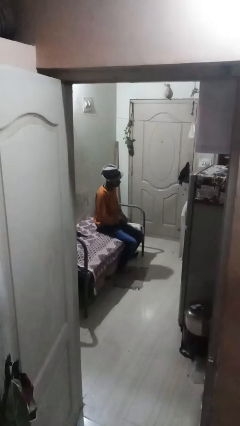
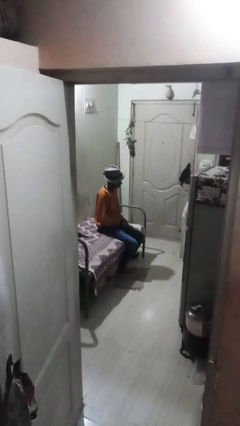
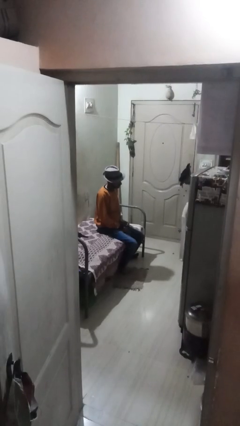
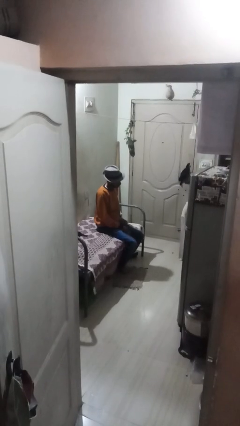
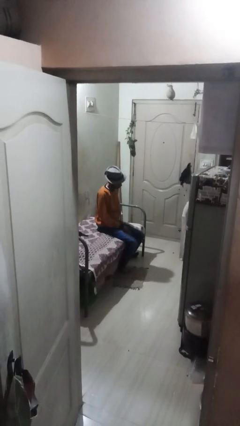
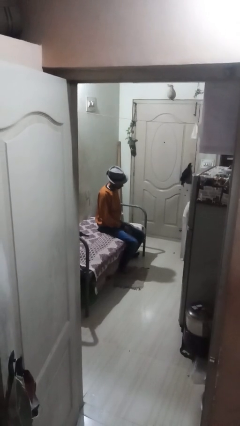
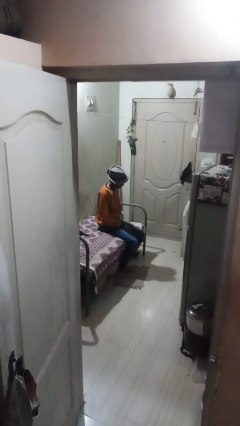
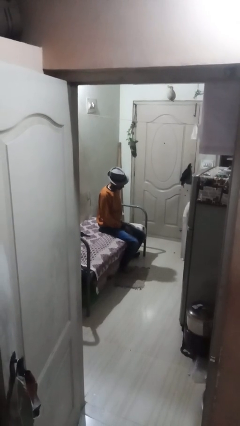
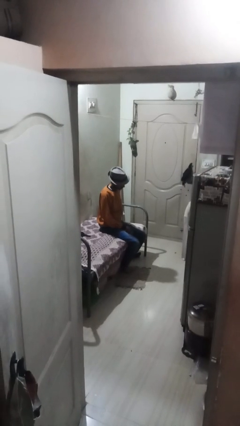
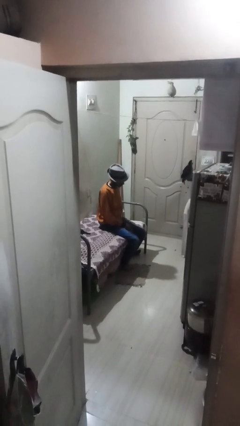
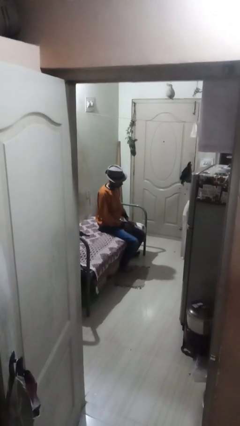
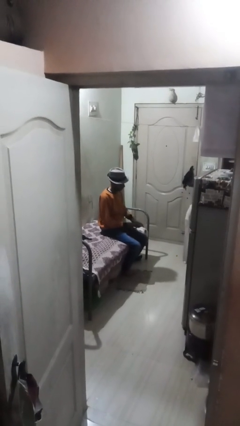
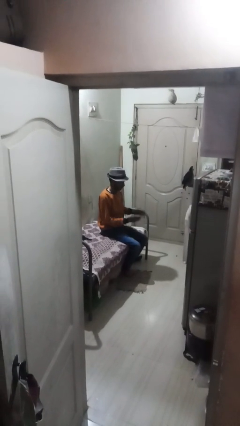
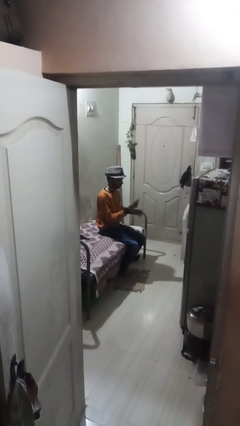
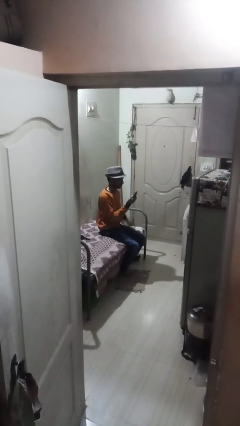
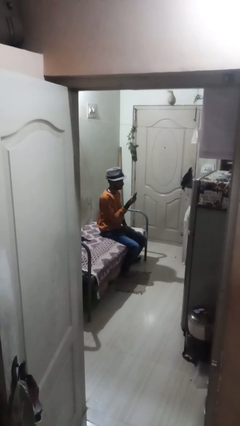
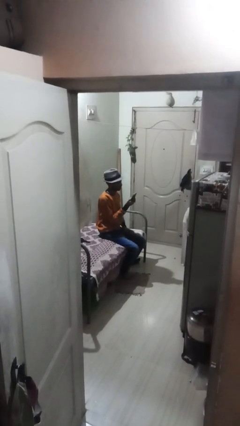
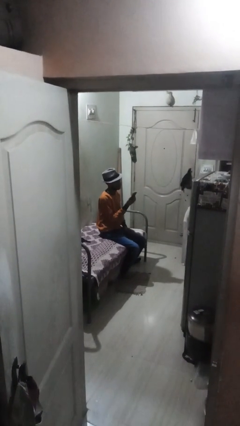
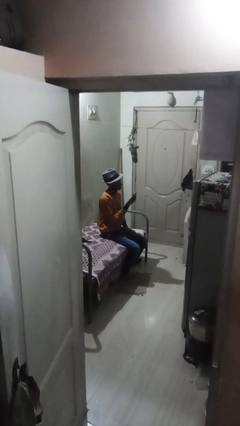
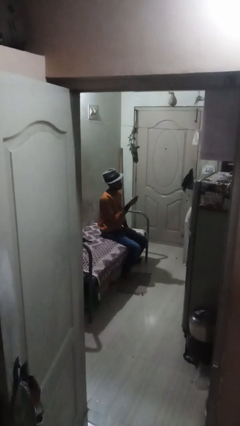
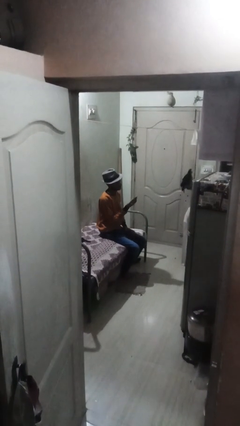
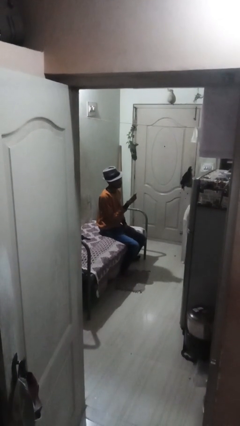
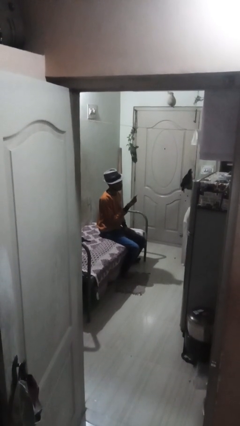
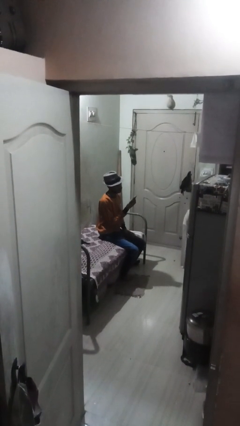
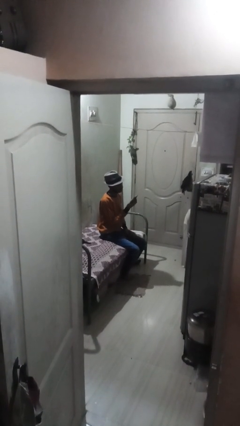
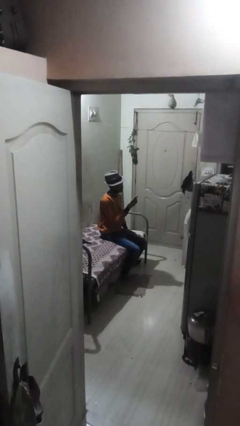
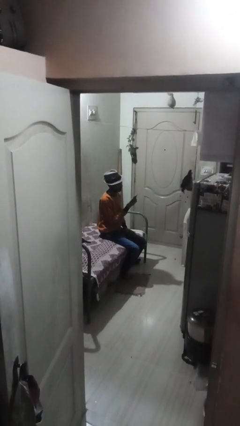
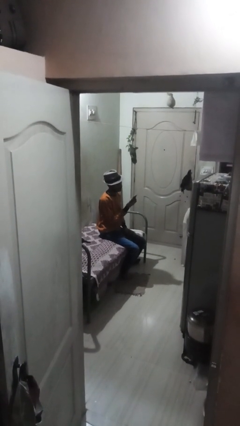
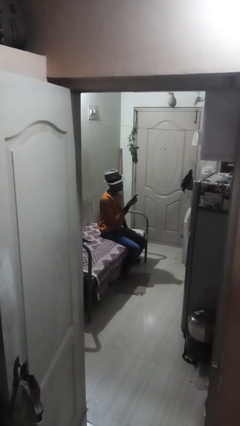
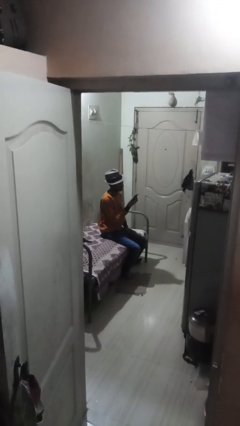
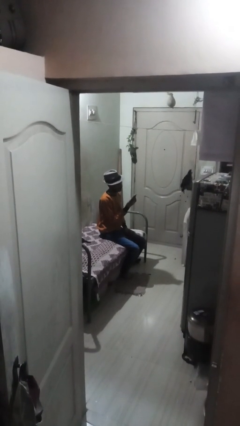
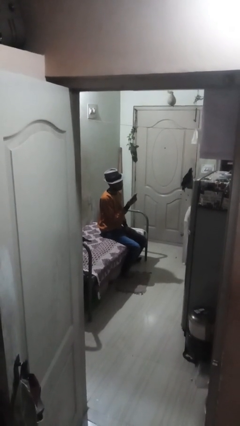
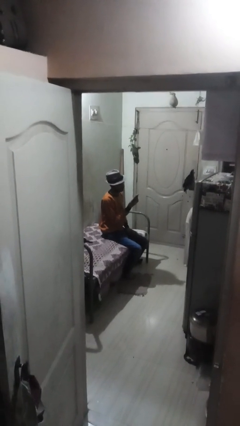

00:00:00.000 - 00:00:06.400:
person takes phone from pocket

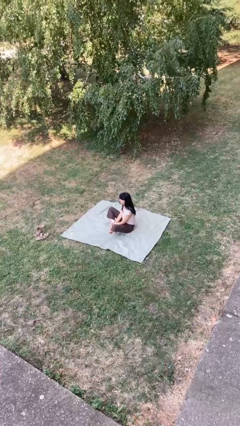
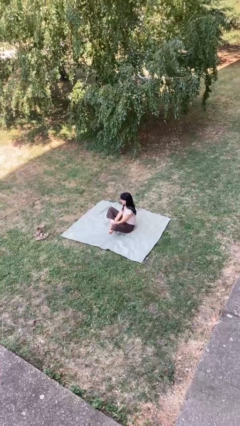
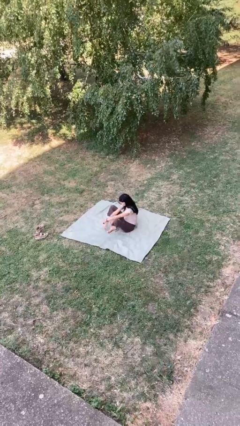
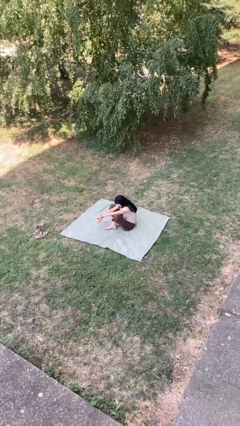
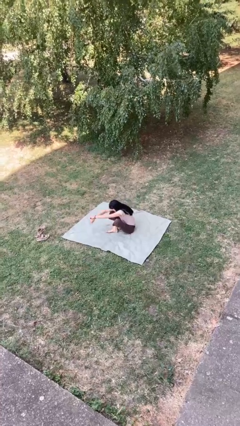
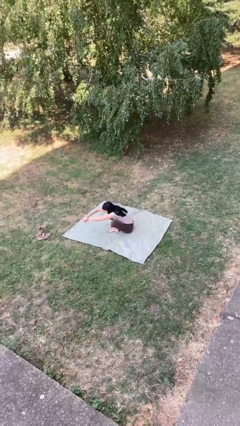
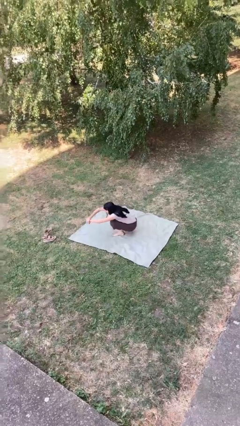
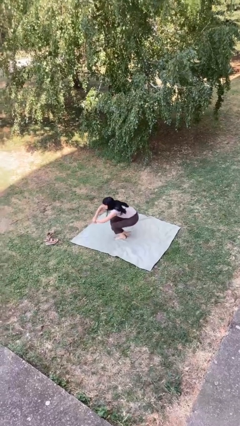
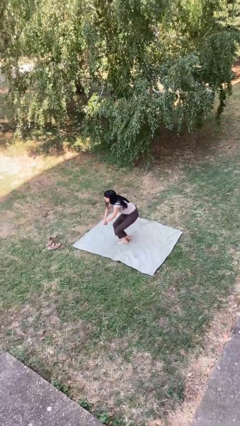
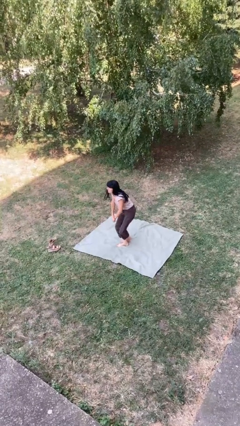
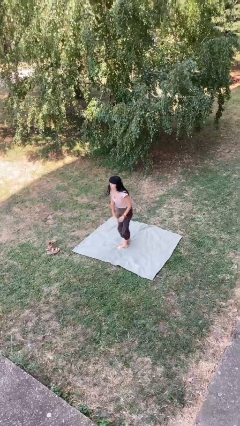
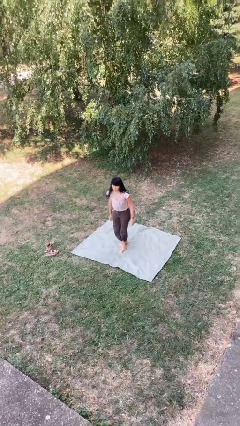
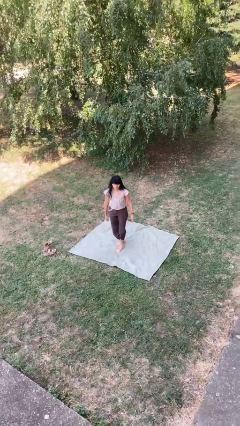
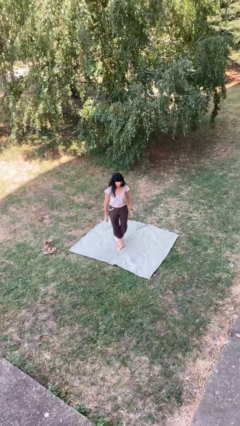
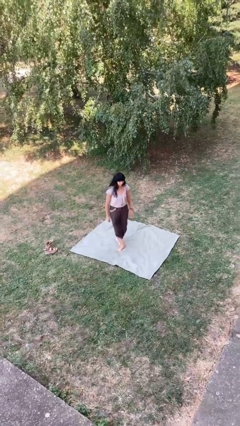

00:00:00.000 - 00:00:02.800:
person stands up from floor

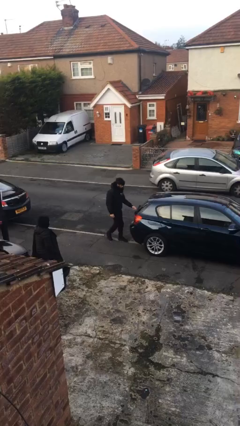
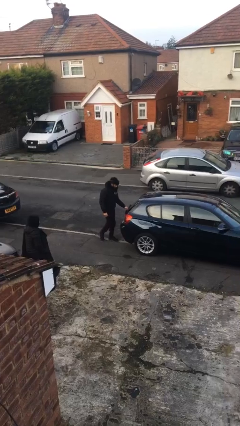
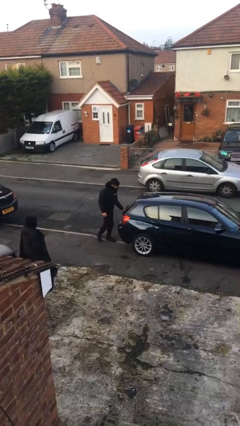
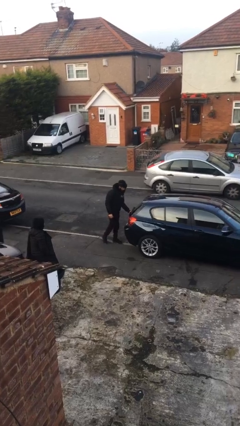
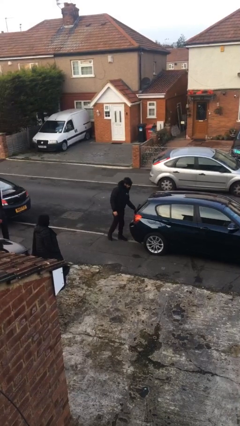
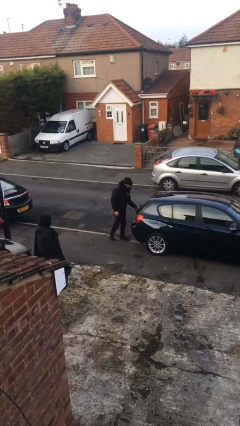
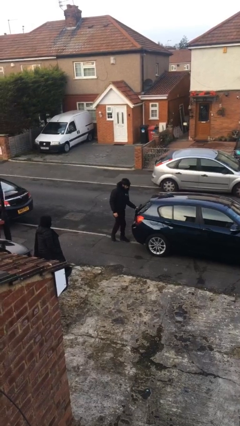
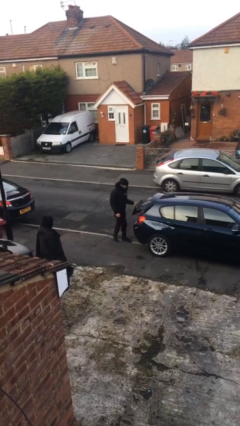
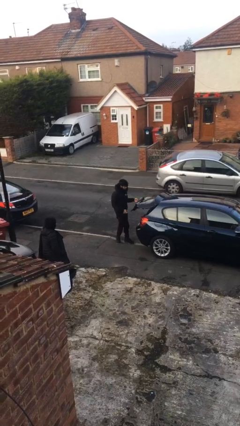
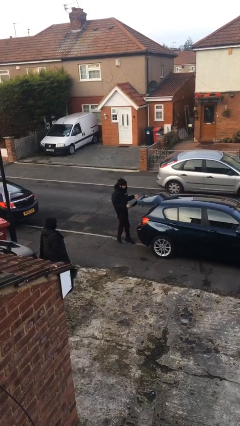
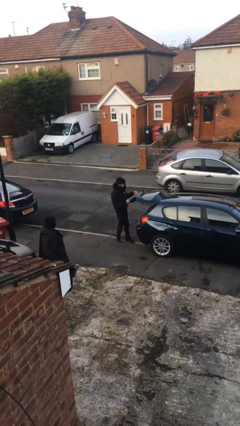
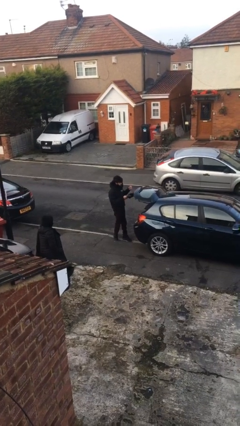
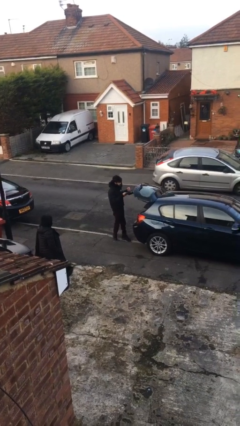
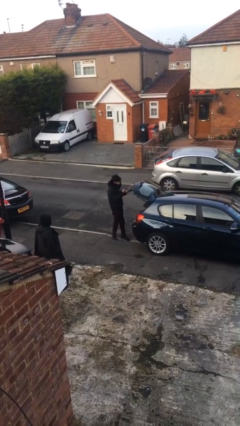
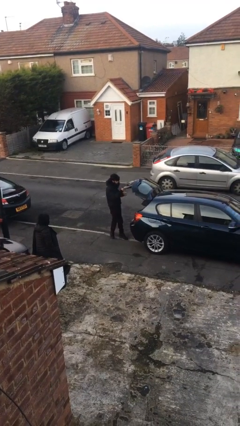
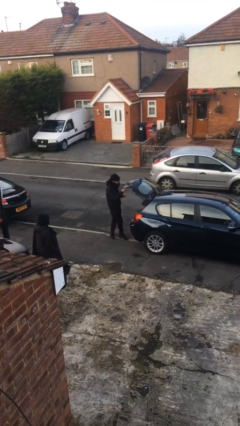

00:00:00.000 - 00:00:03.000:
person opens car trunk

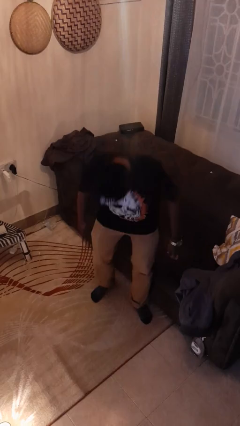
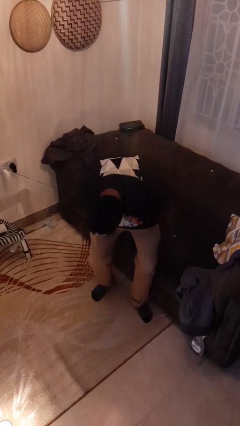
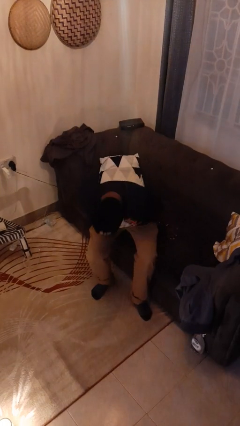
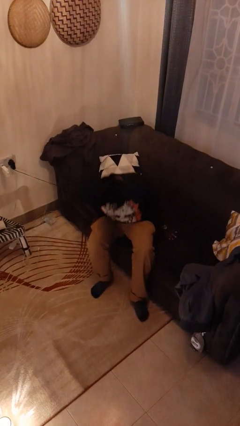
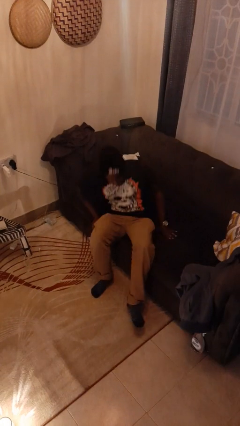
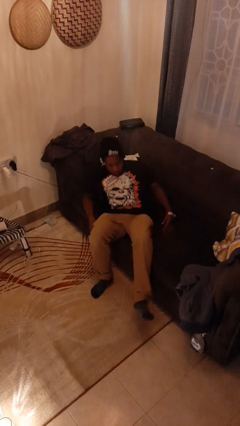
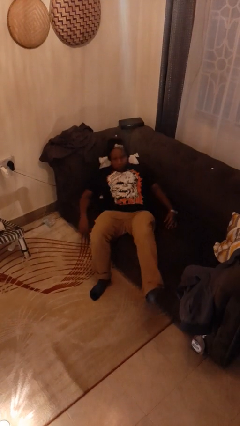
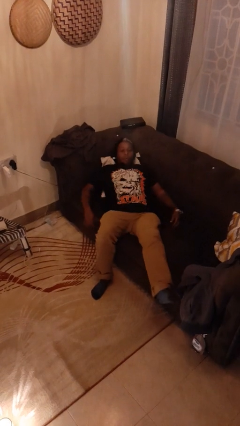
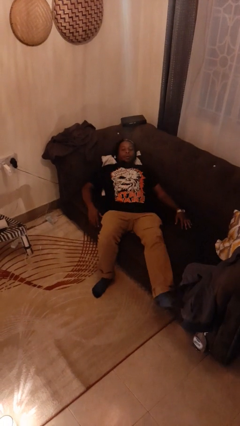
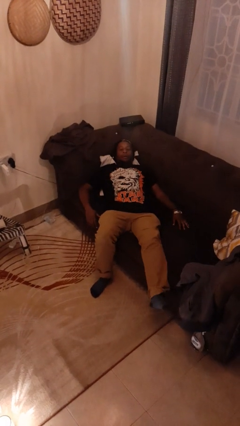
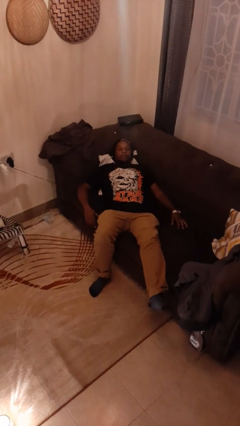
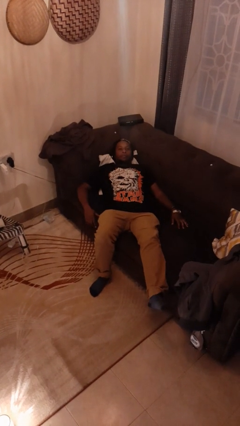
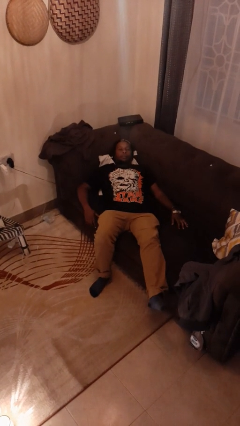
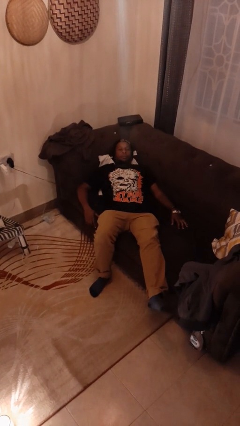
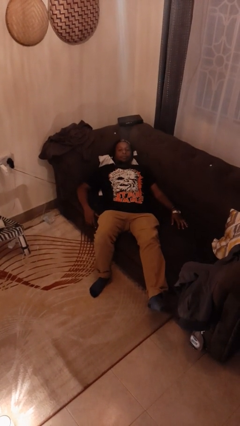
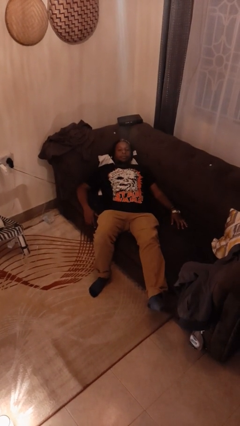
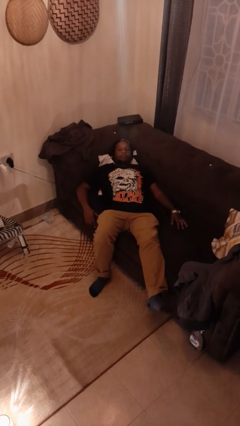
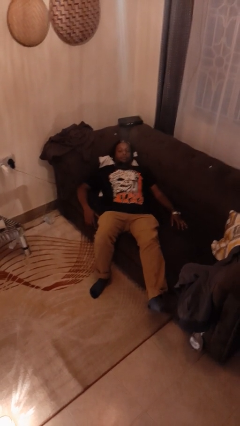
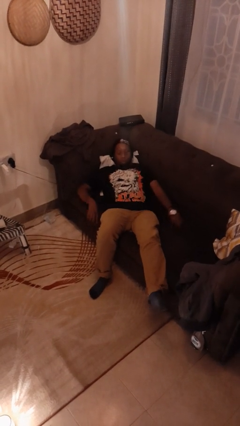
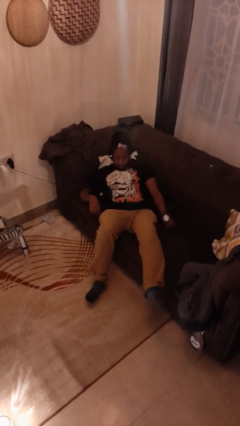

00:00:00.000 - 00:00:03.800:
person lies down on couch

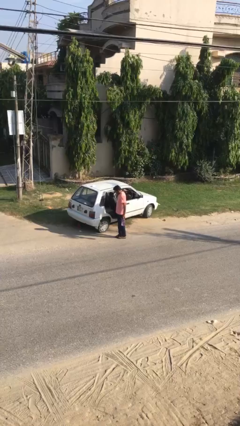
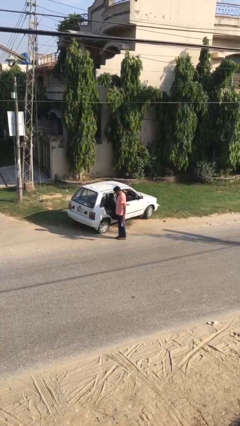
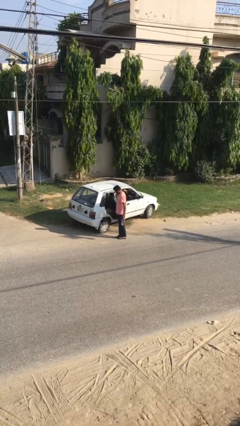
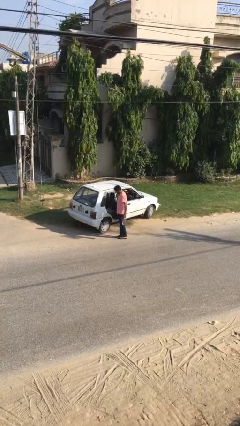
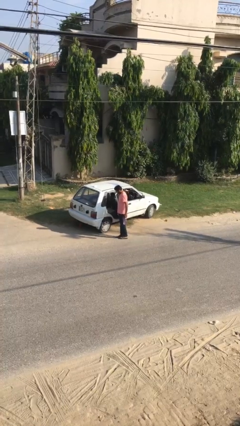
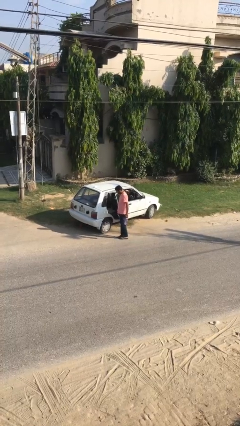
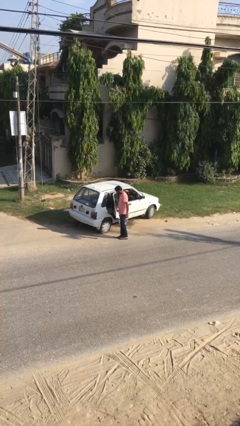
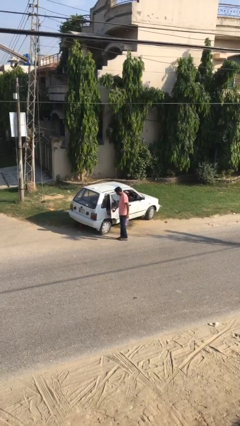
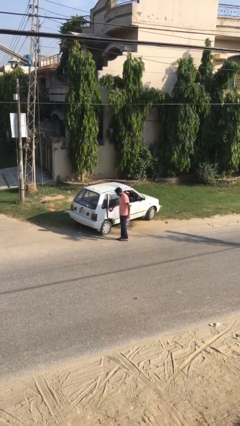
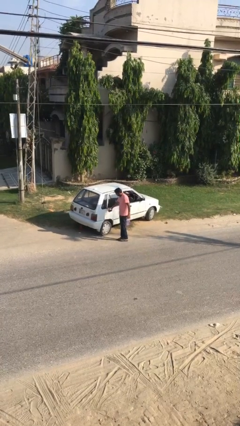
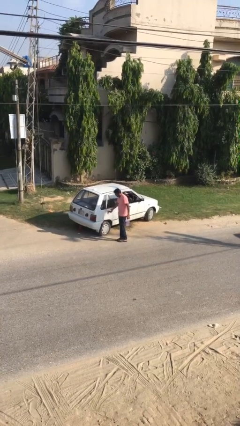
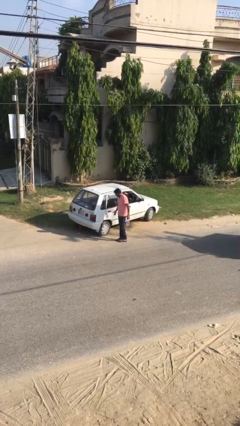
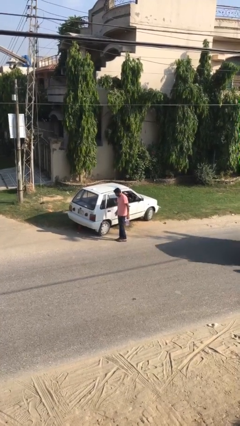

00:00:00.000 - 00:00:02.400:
person closes car door
